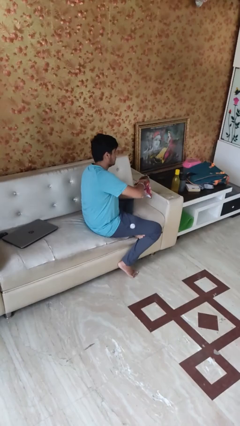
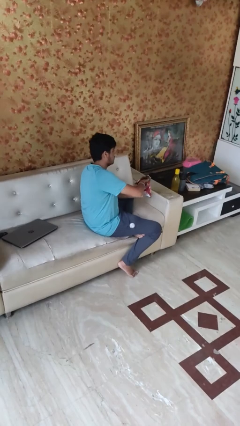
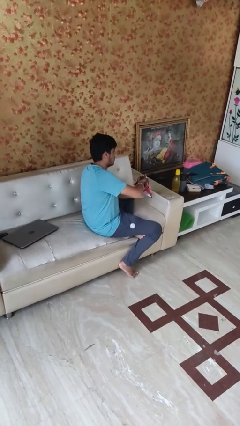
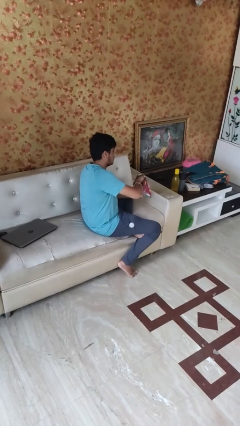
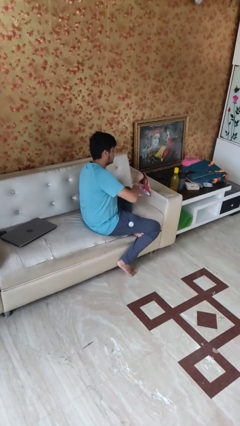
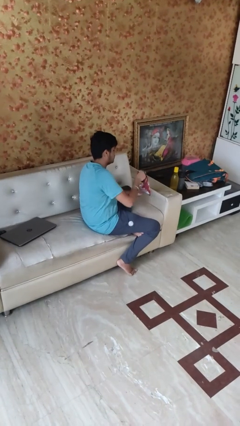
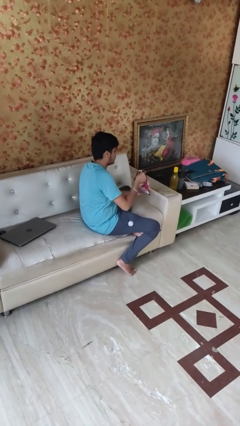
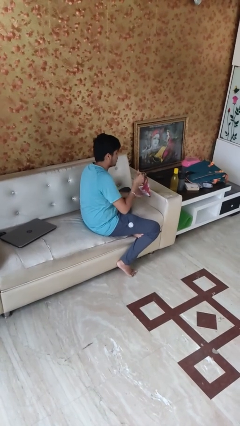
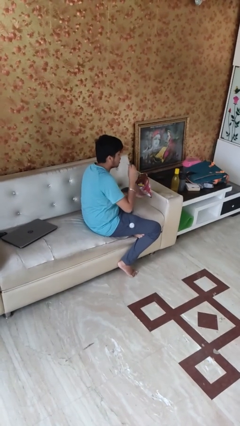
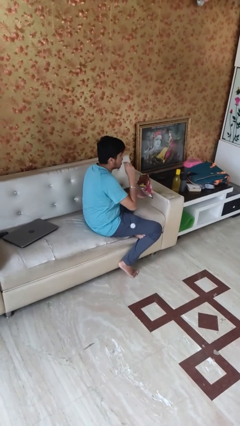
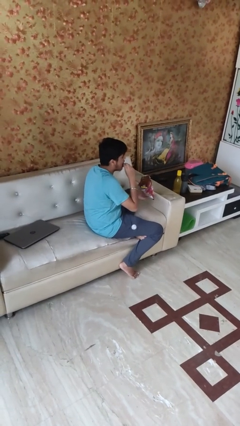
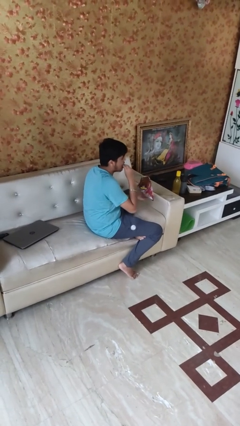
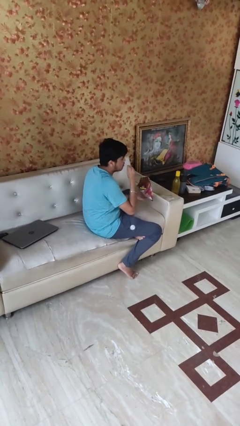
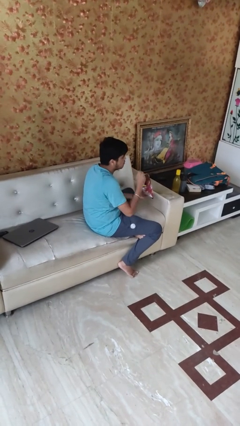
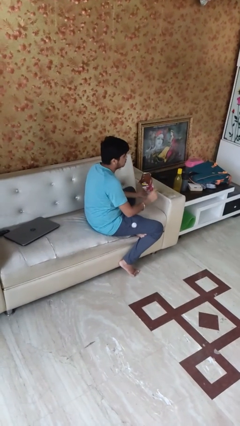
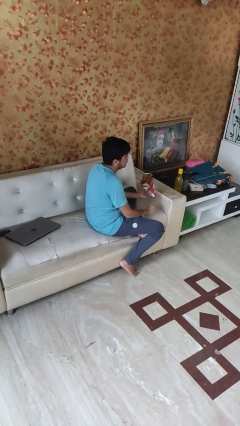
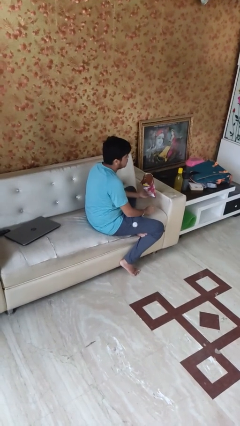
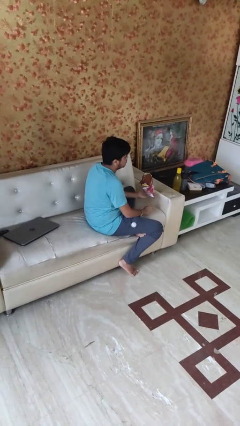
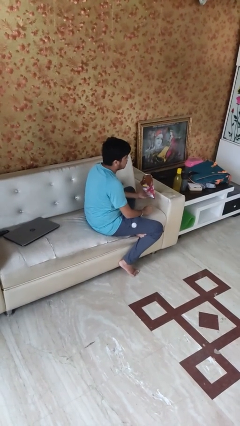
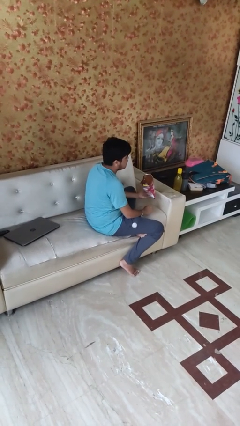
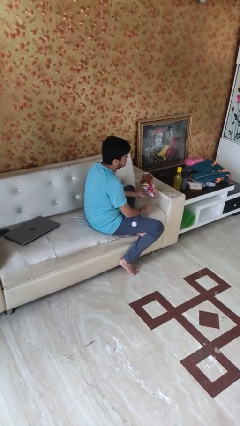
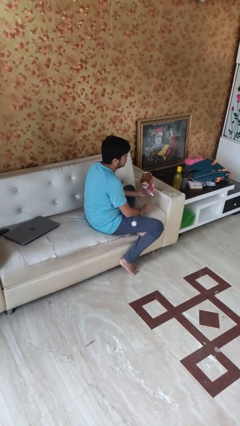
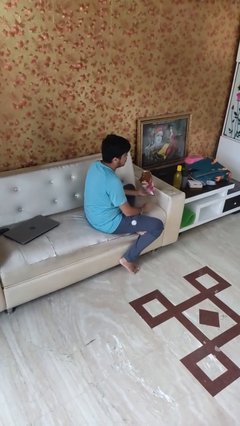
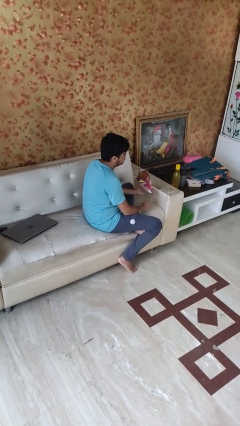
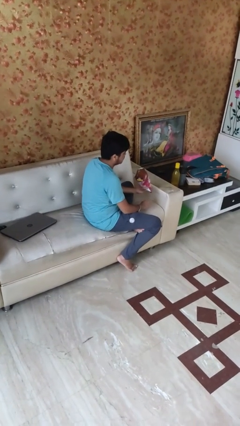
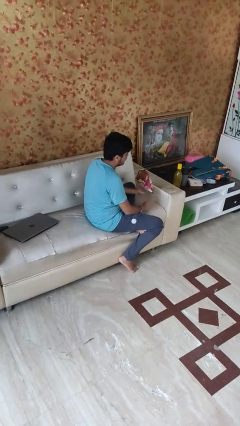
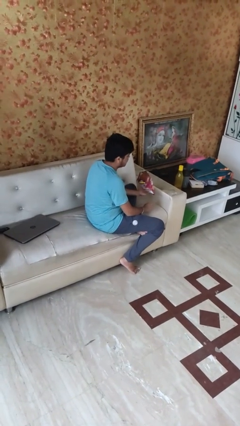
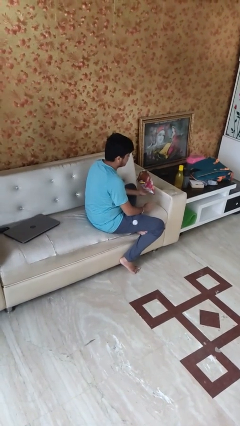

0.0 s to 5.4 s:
person eats snack from bag

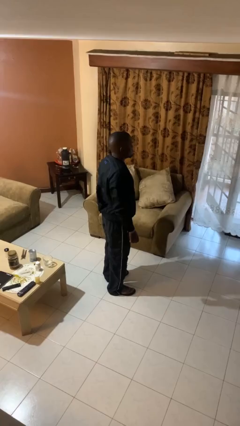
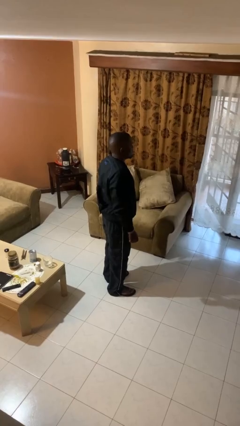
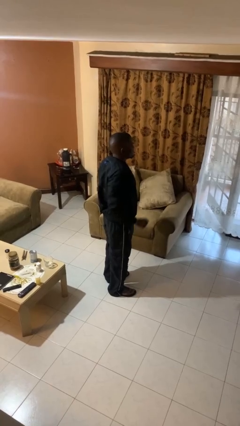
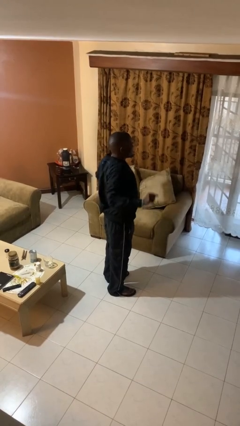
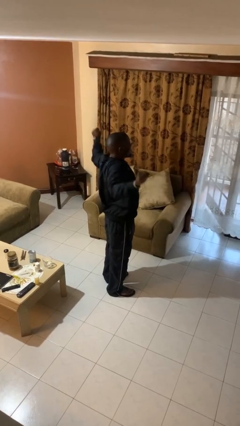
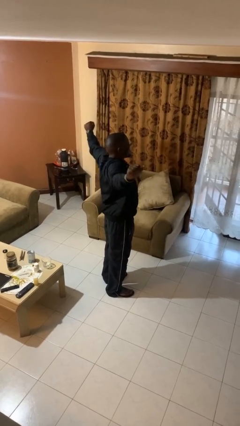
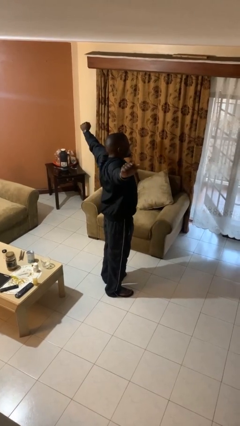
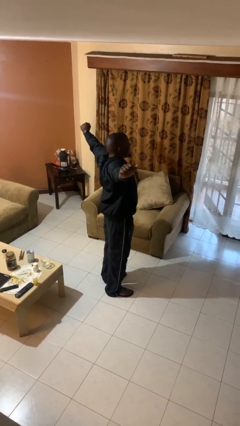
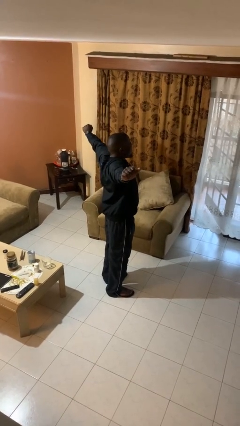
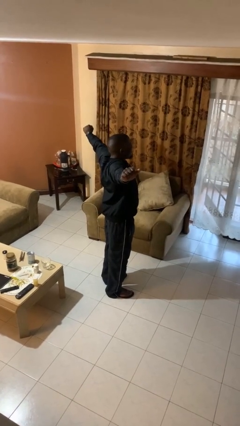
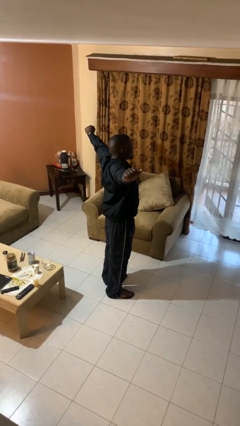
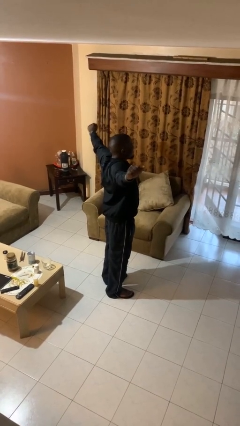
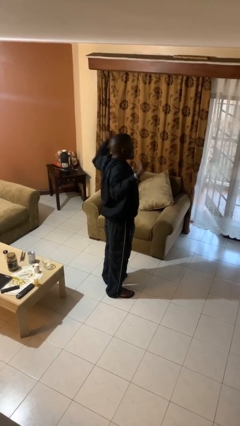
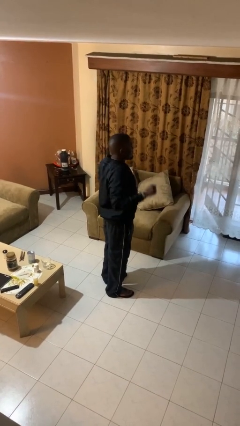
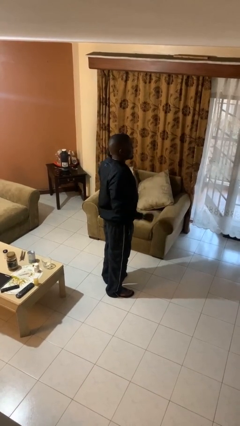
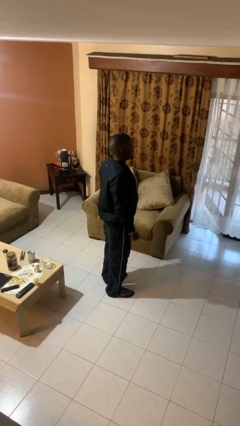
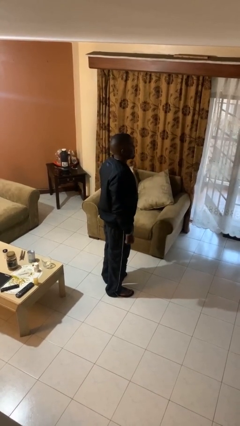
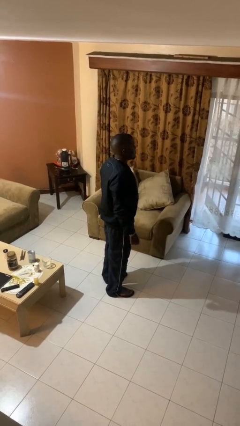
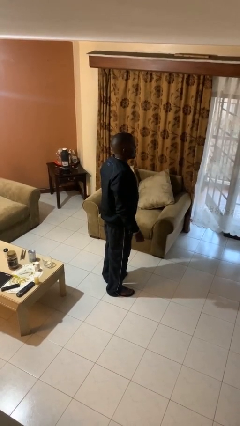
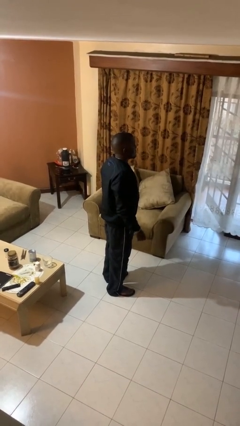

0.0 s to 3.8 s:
person stretches arms to side

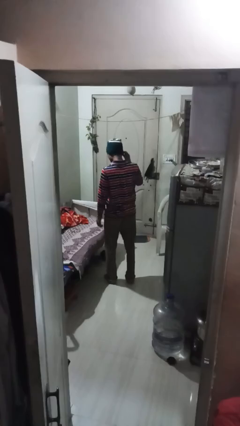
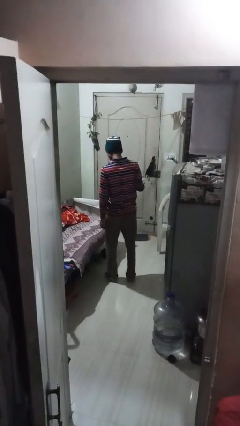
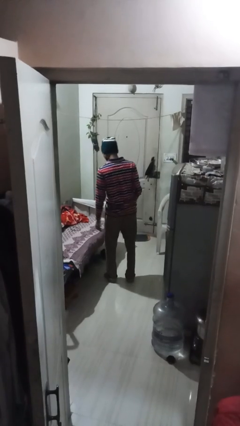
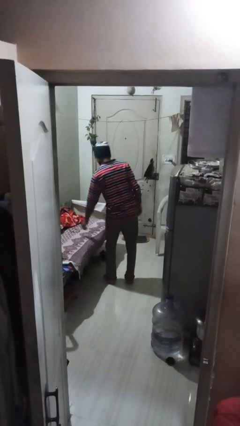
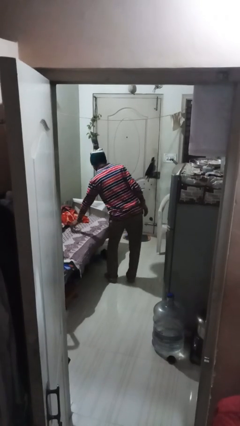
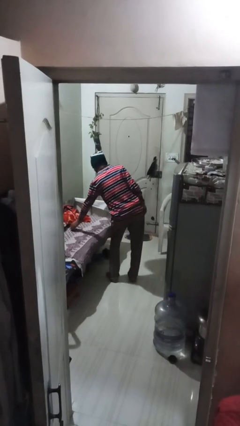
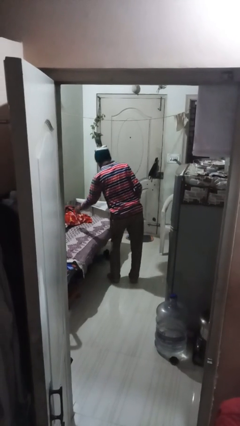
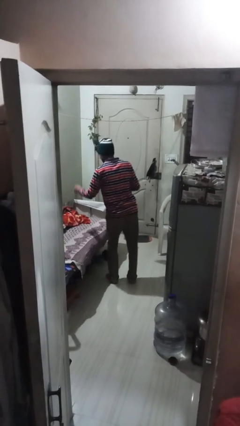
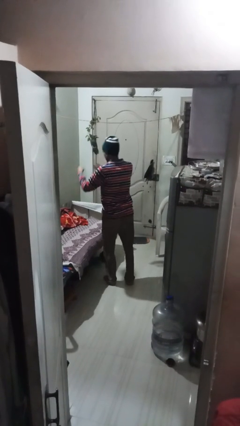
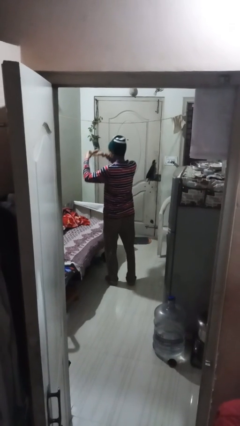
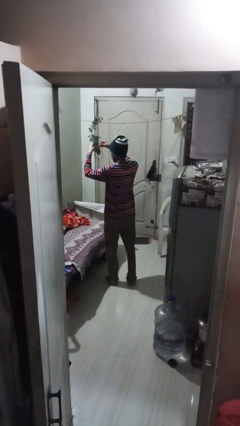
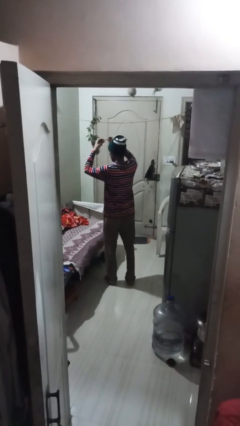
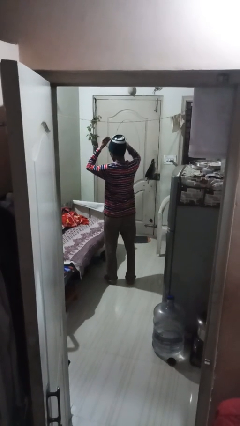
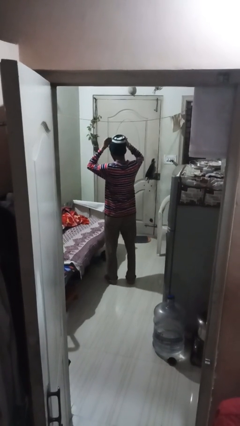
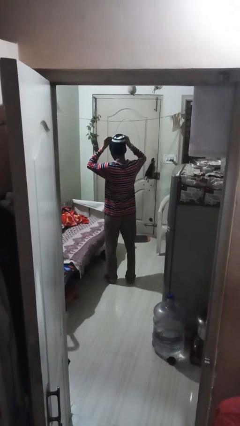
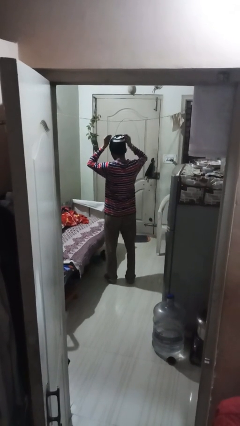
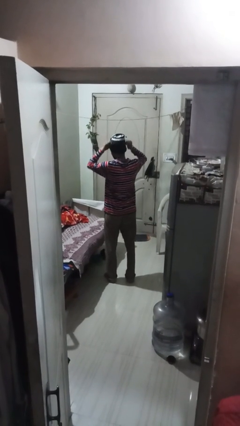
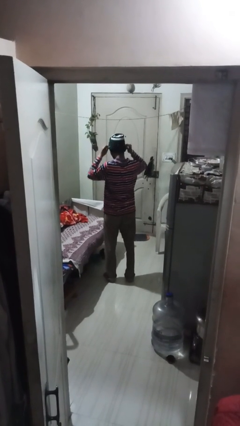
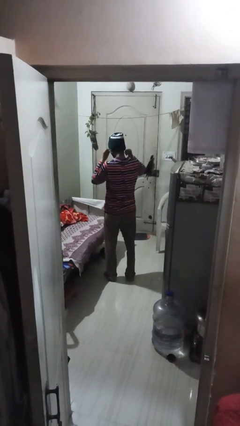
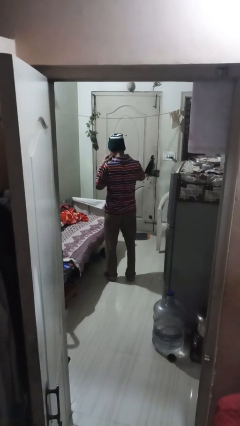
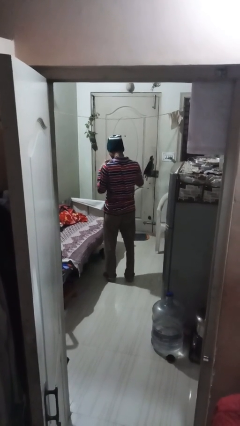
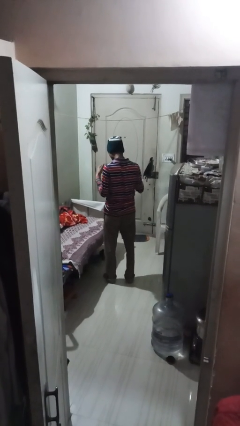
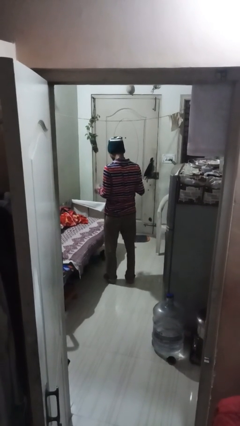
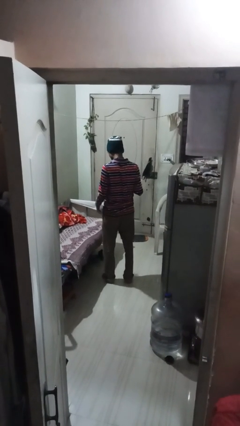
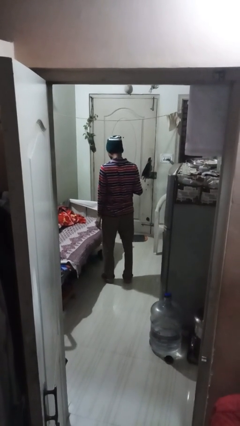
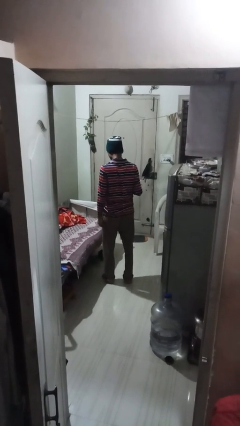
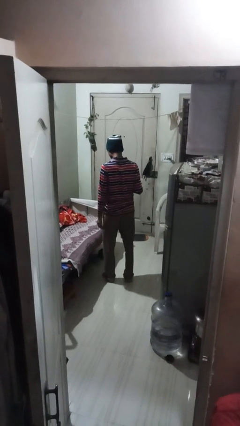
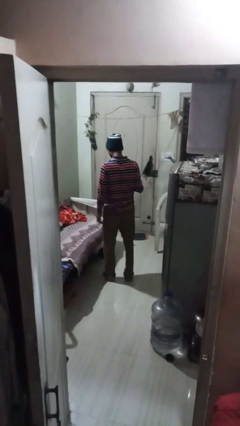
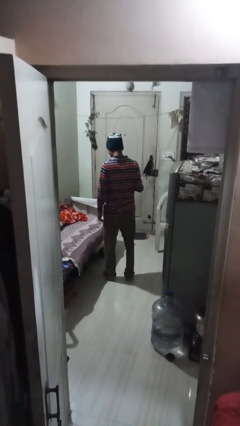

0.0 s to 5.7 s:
person puts on necklace

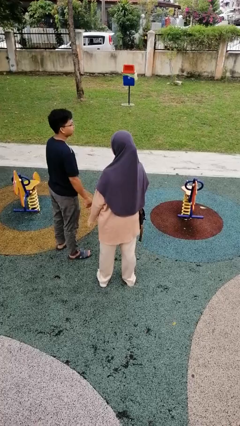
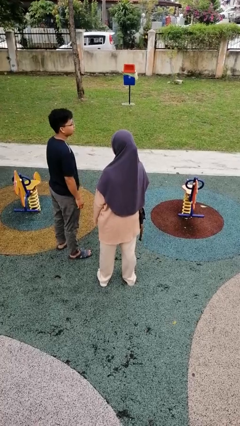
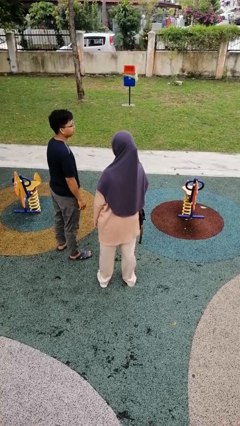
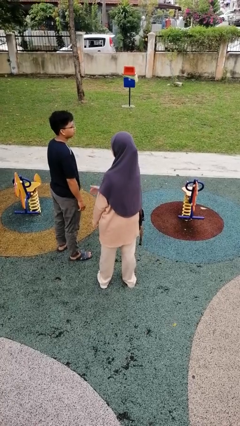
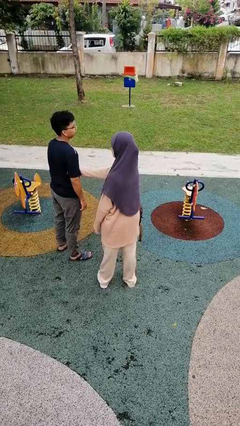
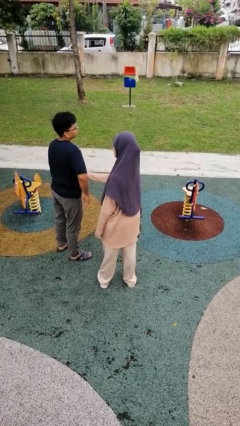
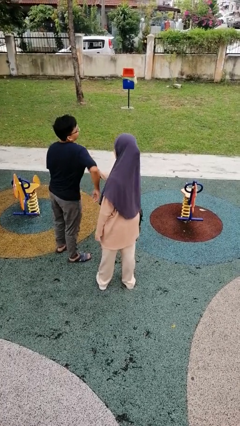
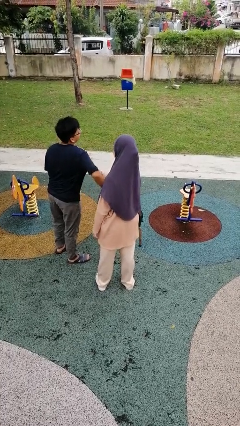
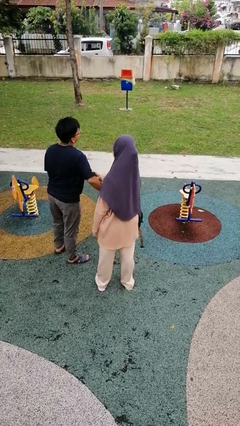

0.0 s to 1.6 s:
person grabs person by bicep

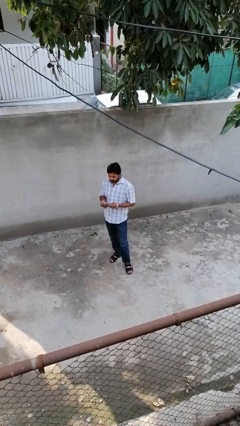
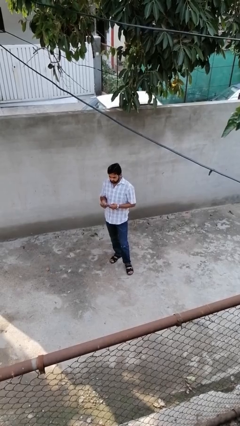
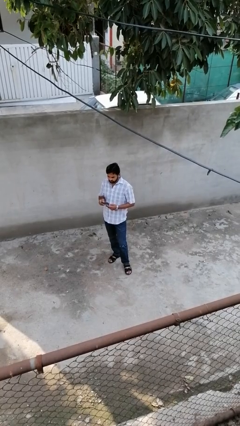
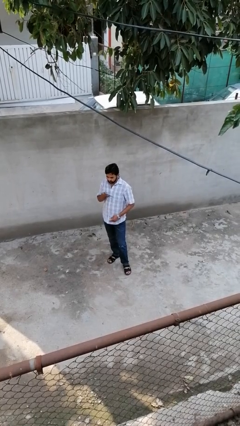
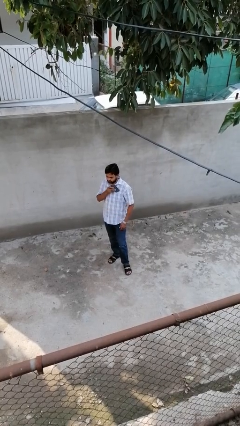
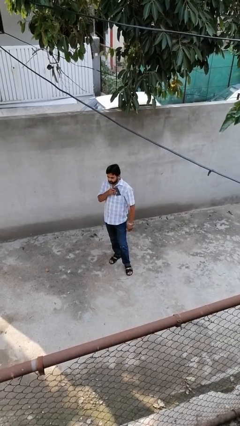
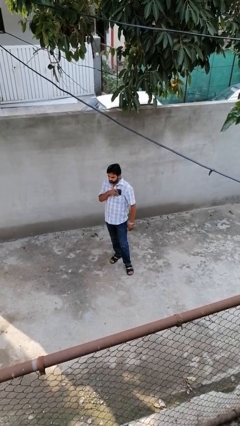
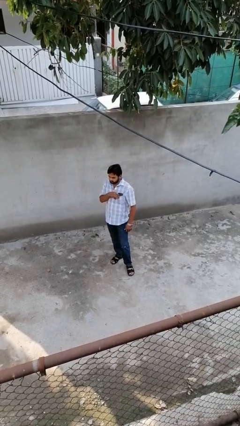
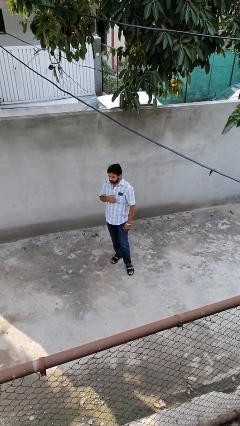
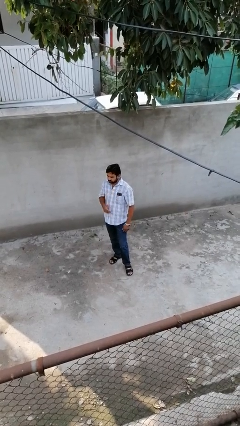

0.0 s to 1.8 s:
person puts phone into pocket
